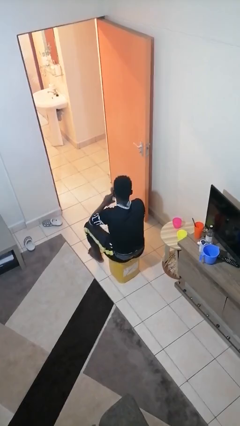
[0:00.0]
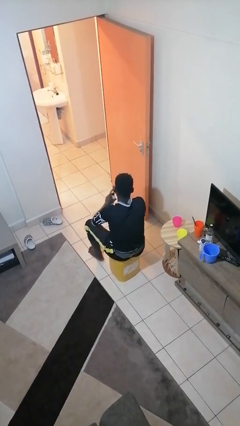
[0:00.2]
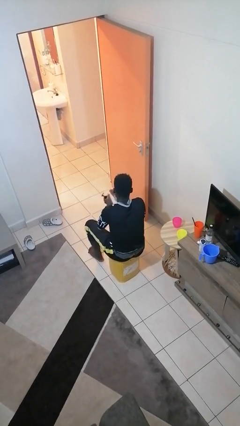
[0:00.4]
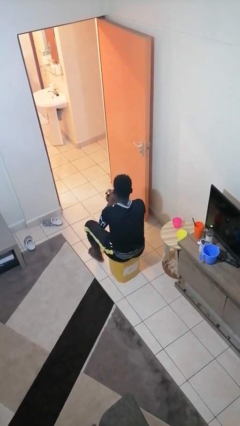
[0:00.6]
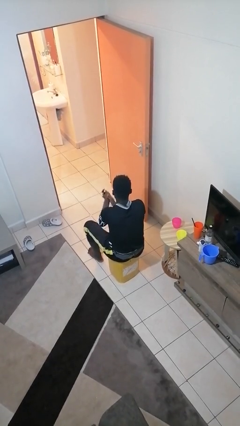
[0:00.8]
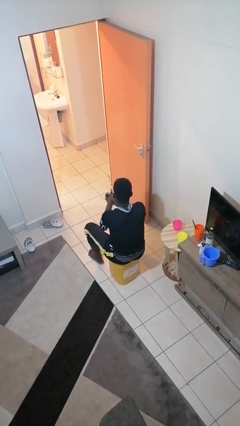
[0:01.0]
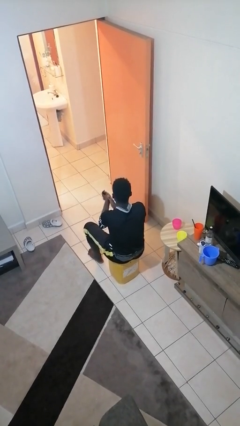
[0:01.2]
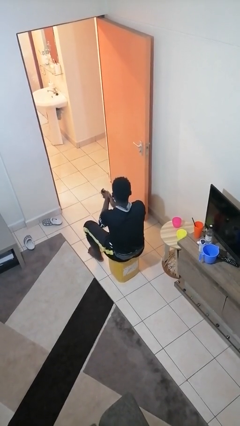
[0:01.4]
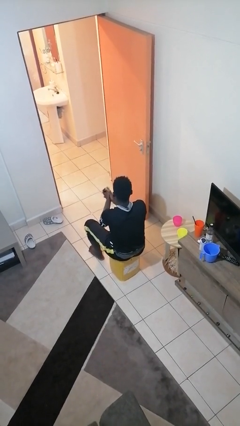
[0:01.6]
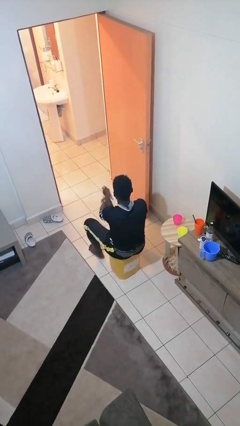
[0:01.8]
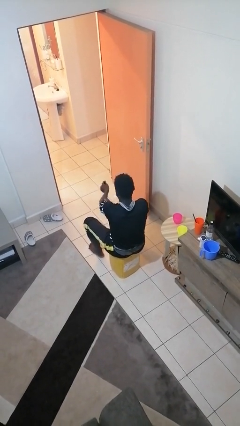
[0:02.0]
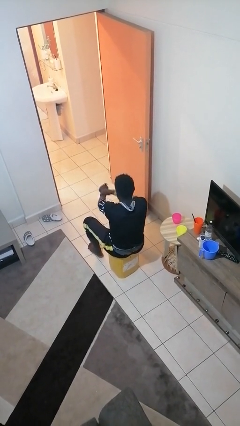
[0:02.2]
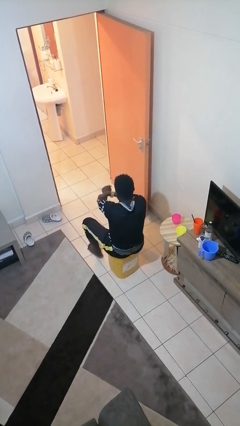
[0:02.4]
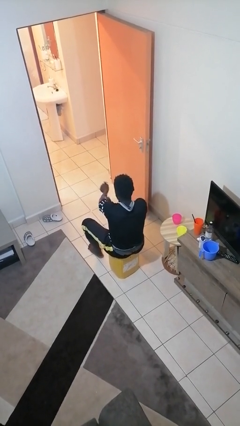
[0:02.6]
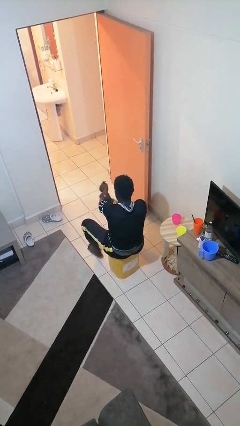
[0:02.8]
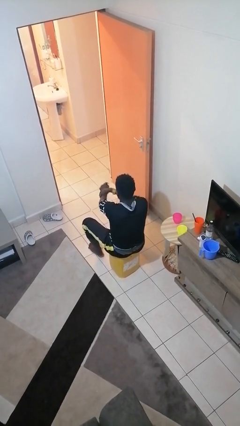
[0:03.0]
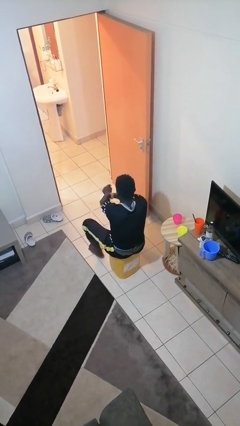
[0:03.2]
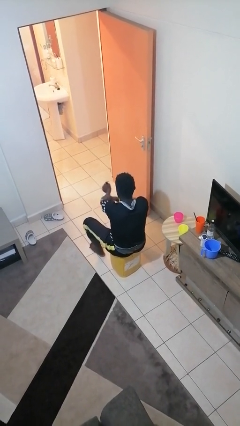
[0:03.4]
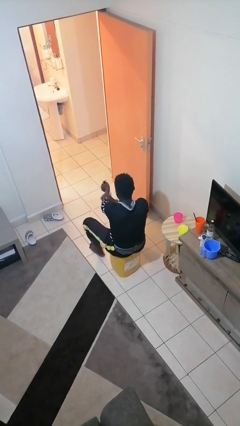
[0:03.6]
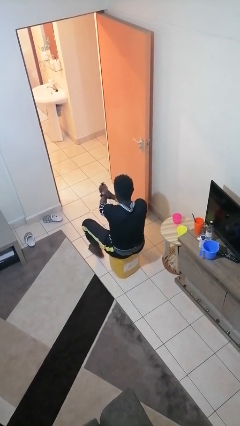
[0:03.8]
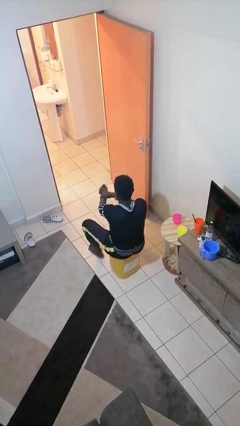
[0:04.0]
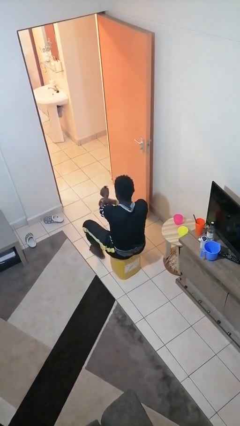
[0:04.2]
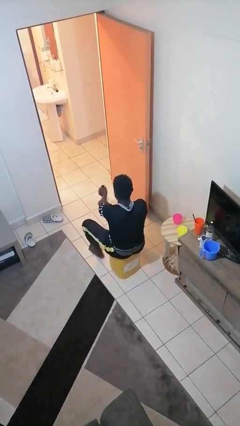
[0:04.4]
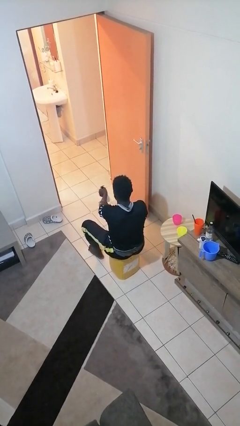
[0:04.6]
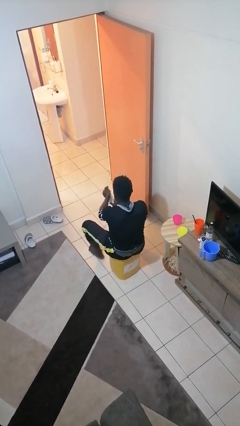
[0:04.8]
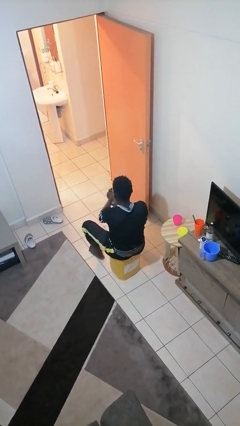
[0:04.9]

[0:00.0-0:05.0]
person applies sunscreen

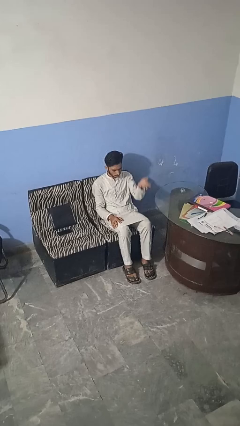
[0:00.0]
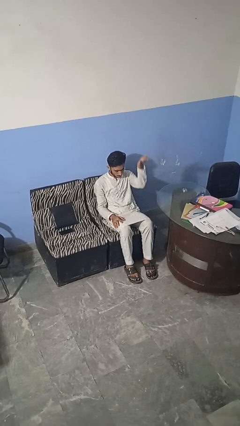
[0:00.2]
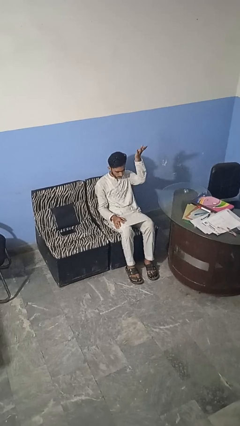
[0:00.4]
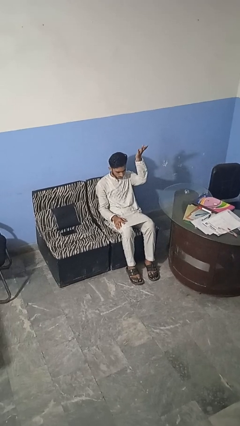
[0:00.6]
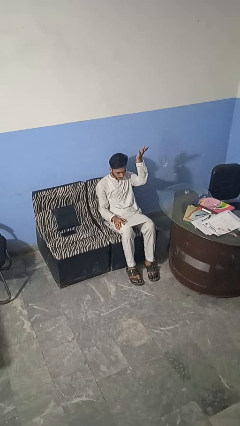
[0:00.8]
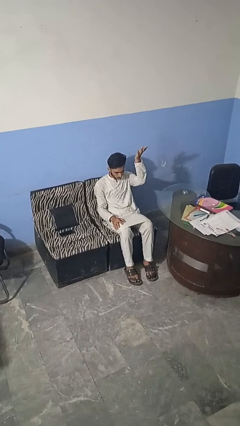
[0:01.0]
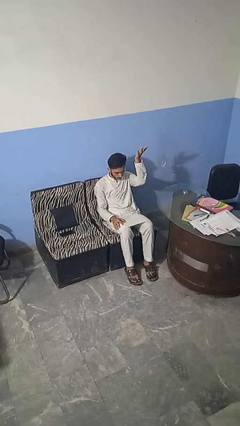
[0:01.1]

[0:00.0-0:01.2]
person gestures swipe up

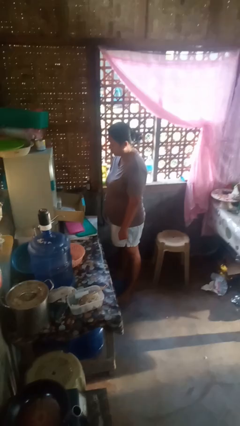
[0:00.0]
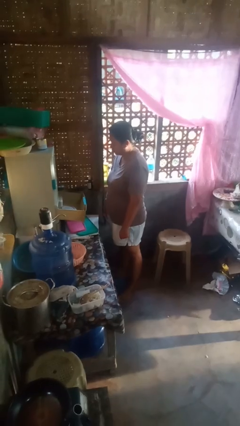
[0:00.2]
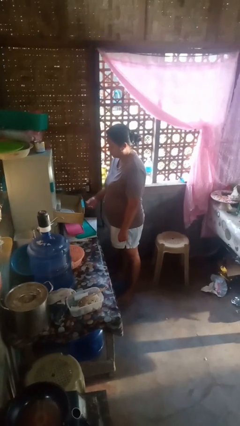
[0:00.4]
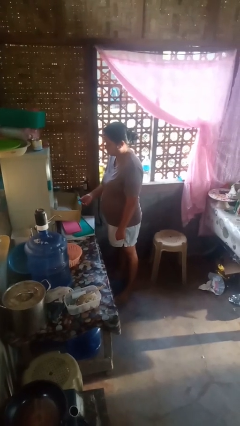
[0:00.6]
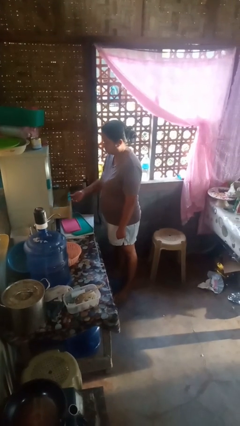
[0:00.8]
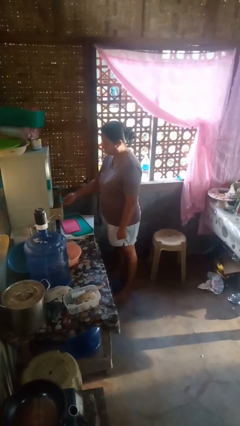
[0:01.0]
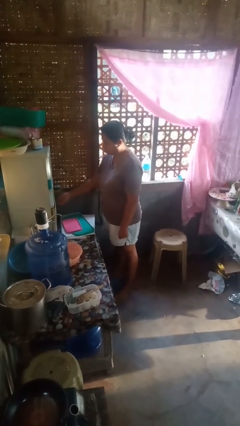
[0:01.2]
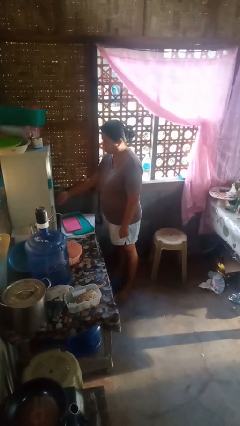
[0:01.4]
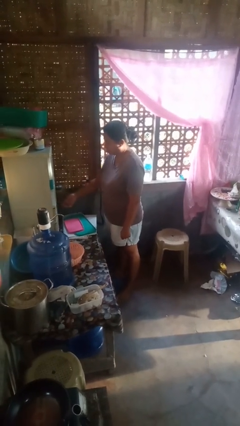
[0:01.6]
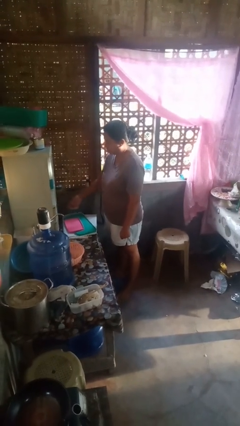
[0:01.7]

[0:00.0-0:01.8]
person closes kitchen drawer

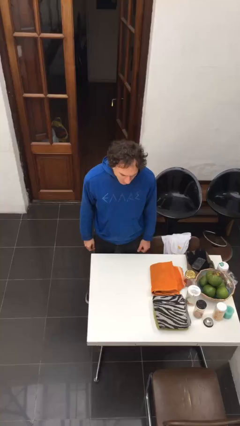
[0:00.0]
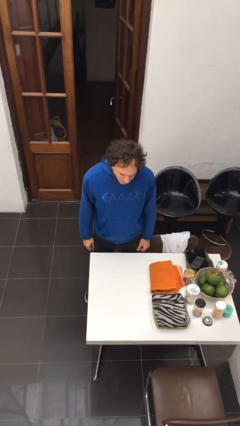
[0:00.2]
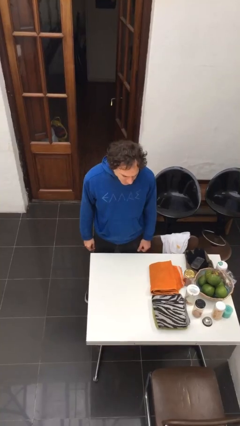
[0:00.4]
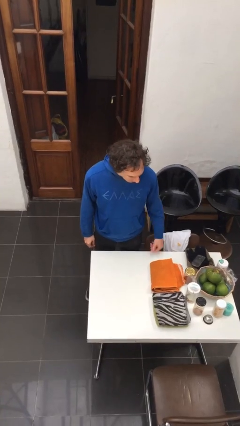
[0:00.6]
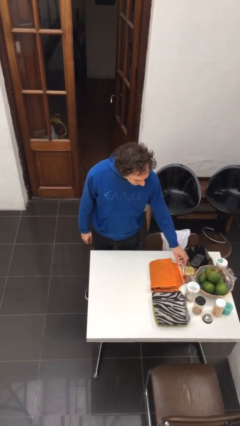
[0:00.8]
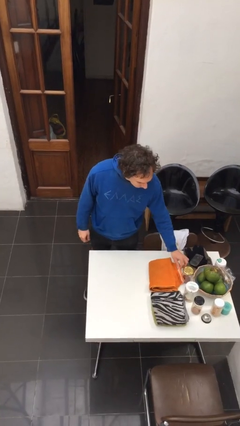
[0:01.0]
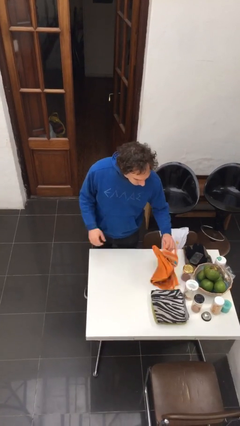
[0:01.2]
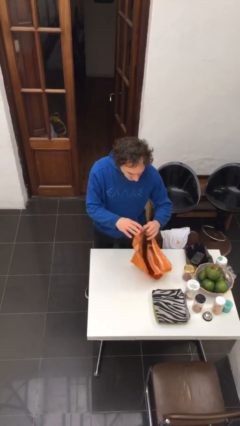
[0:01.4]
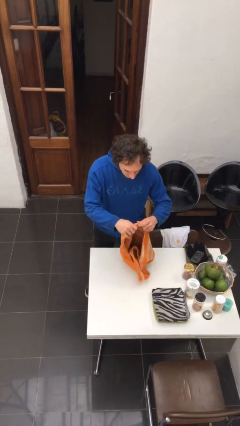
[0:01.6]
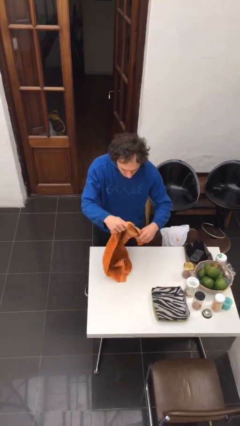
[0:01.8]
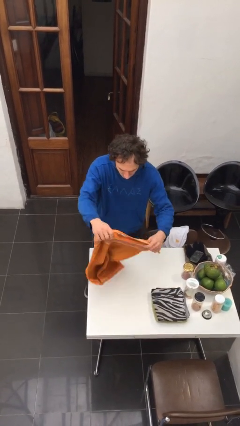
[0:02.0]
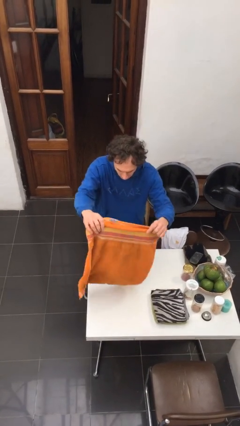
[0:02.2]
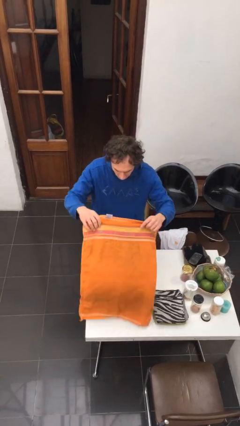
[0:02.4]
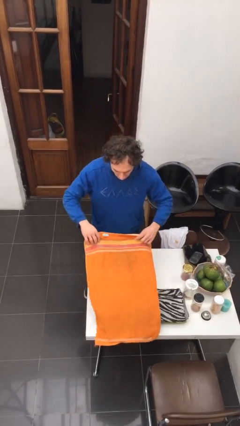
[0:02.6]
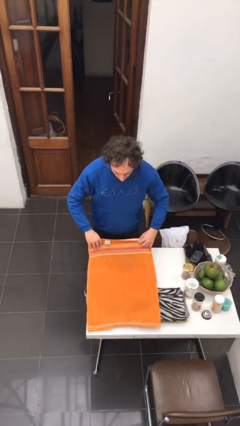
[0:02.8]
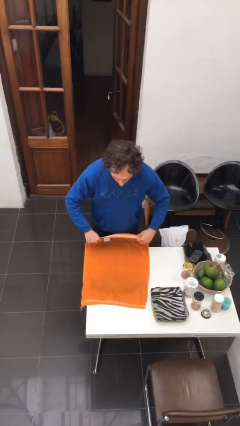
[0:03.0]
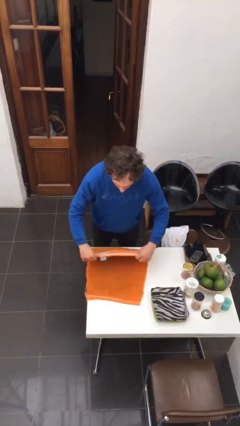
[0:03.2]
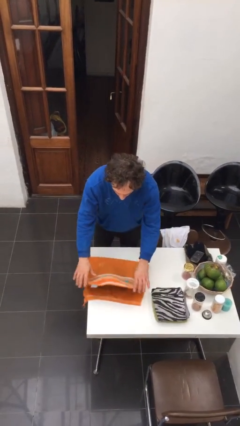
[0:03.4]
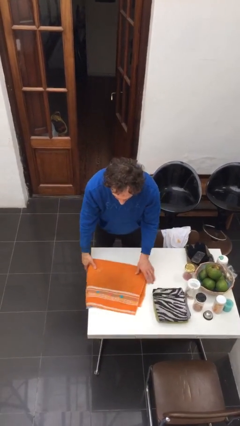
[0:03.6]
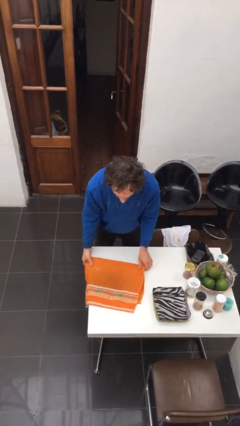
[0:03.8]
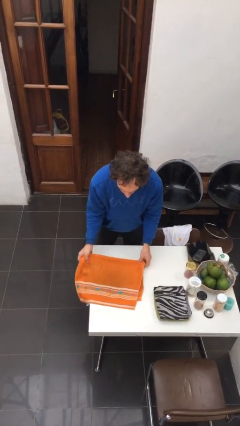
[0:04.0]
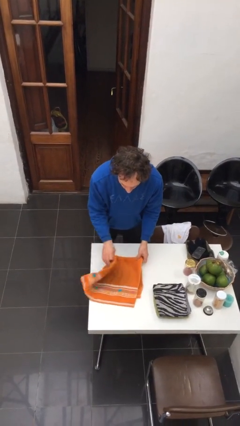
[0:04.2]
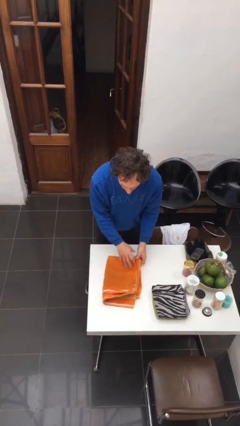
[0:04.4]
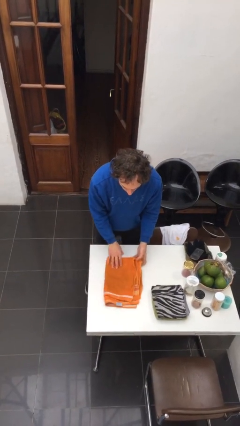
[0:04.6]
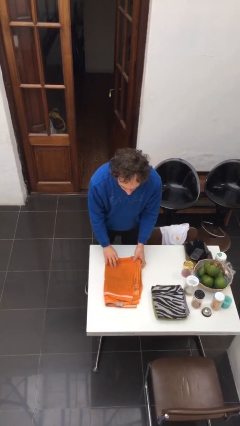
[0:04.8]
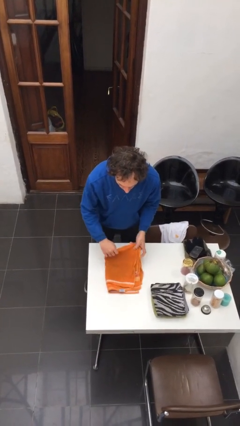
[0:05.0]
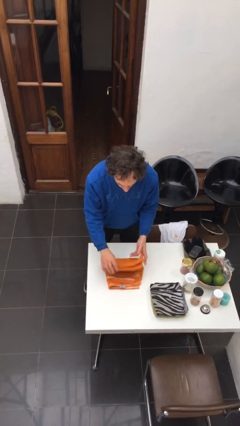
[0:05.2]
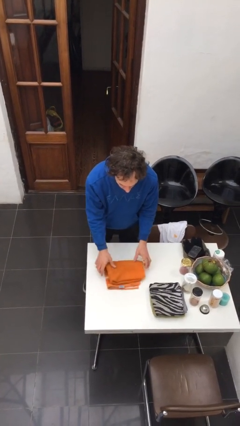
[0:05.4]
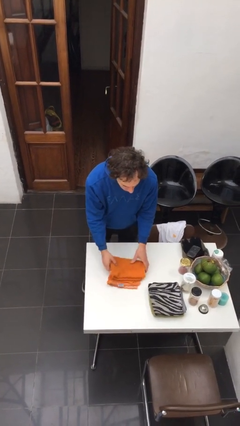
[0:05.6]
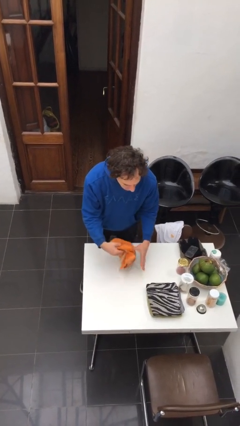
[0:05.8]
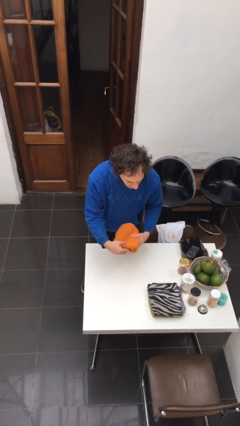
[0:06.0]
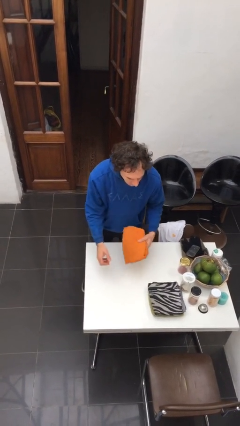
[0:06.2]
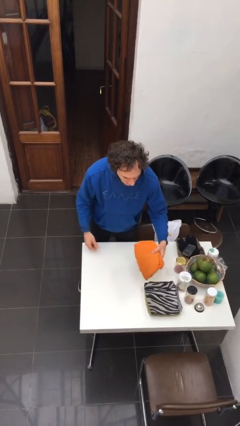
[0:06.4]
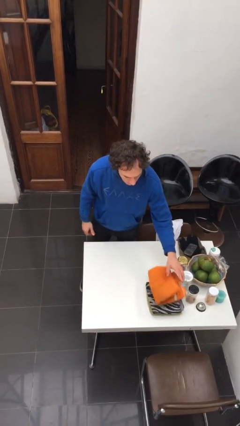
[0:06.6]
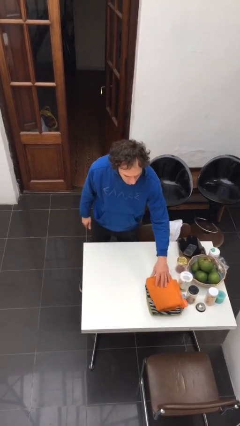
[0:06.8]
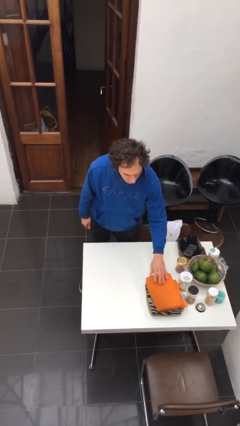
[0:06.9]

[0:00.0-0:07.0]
person folds towel

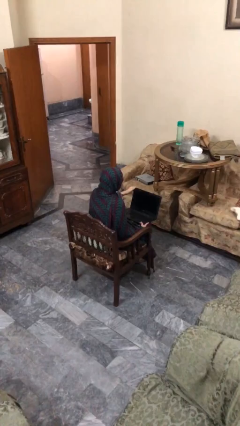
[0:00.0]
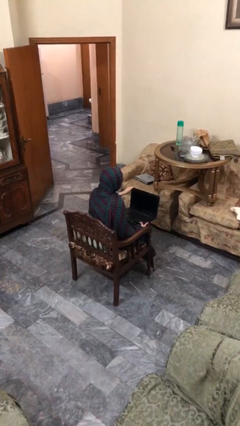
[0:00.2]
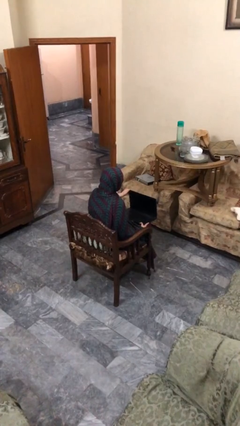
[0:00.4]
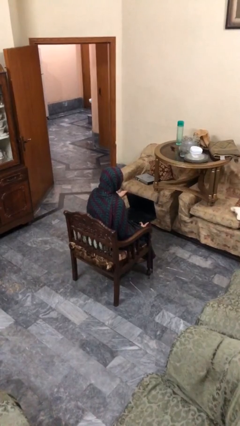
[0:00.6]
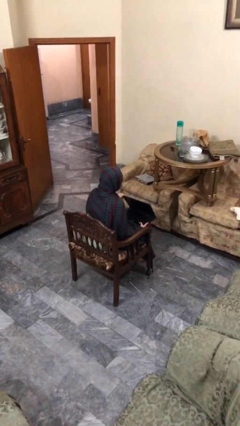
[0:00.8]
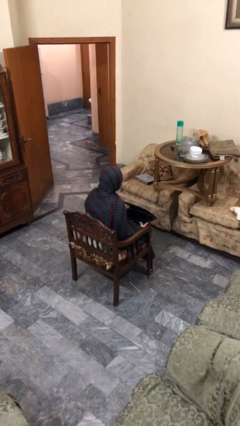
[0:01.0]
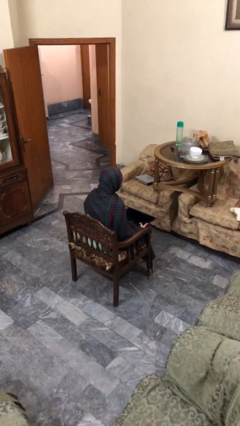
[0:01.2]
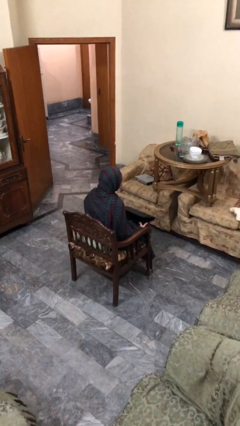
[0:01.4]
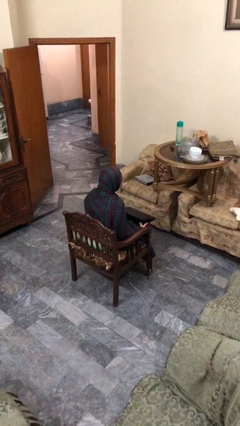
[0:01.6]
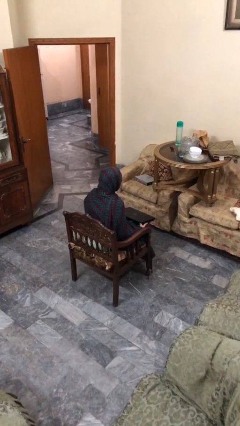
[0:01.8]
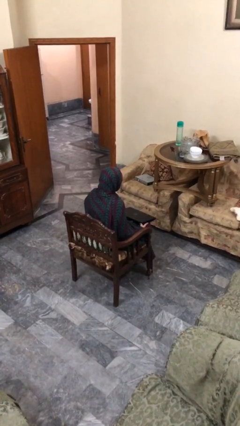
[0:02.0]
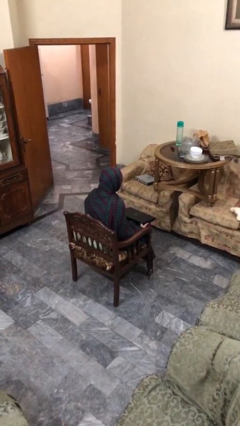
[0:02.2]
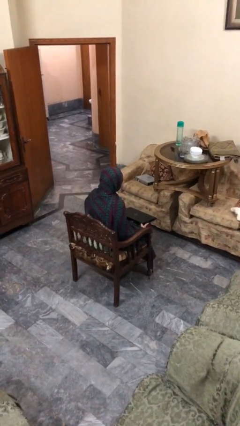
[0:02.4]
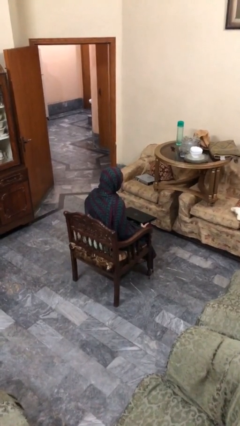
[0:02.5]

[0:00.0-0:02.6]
person closes laptop

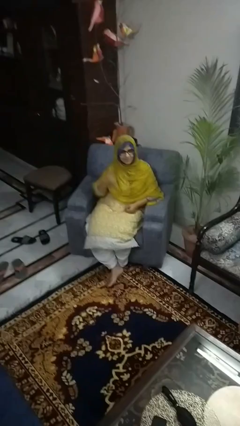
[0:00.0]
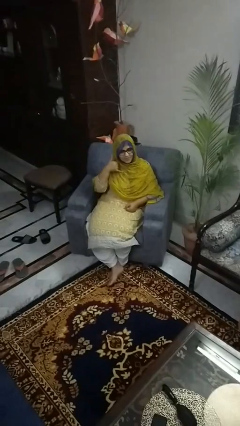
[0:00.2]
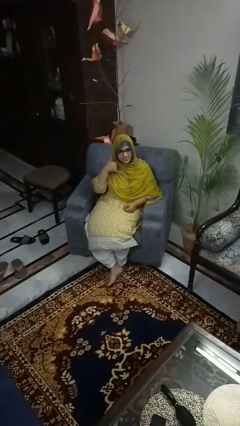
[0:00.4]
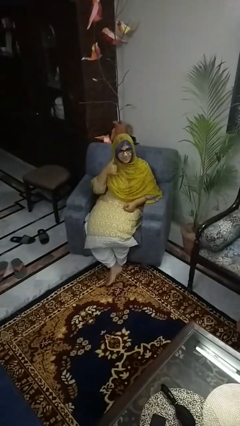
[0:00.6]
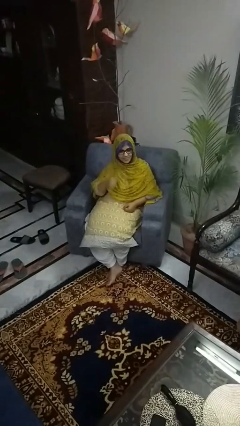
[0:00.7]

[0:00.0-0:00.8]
person gestures call me
